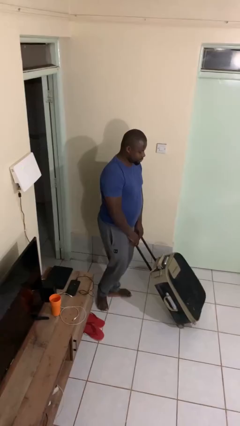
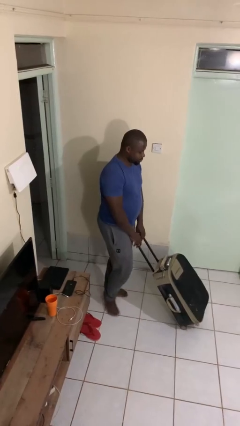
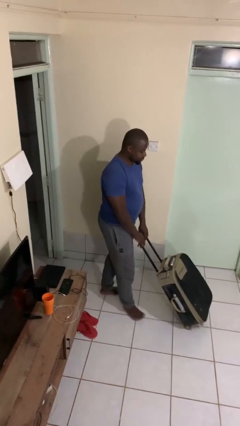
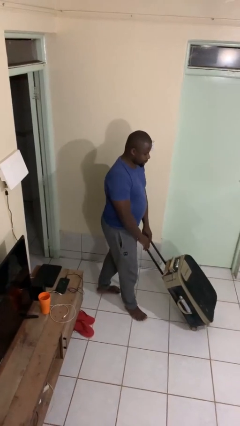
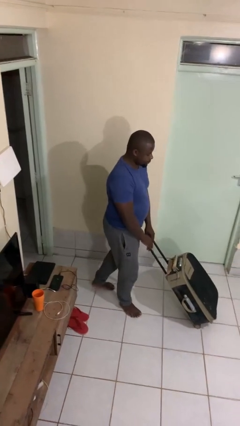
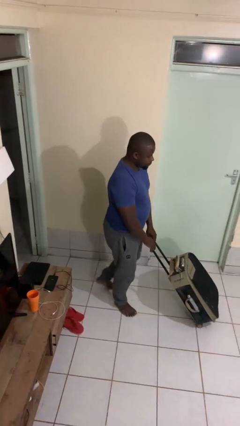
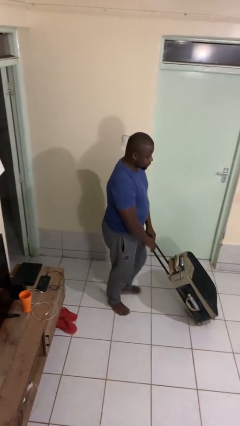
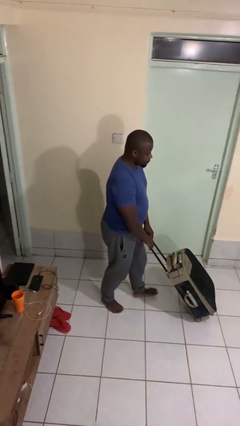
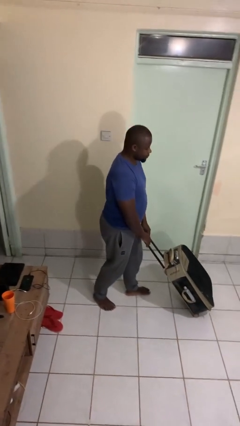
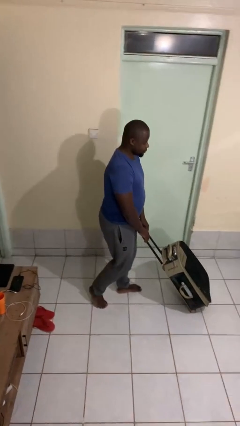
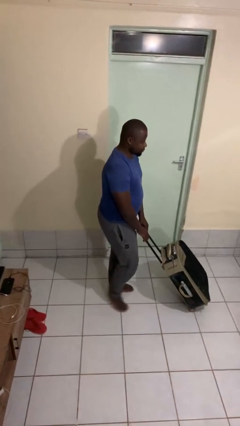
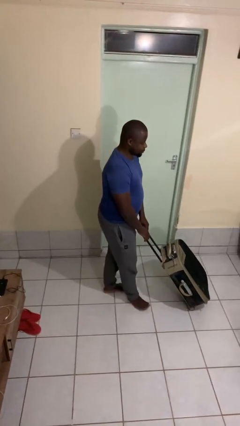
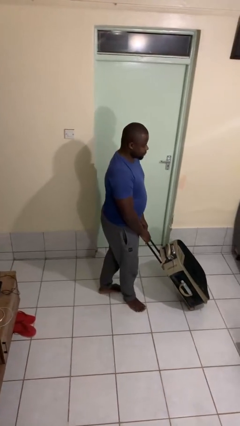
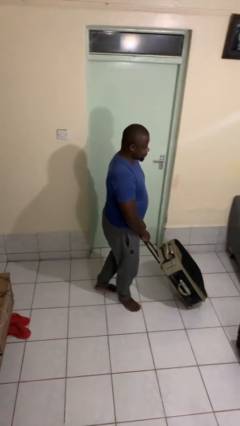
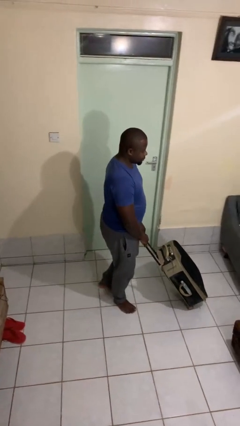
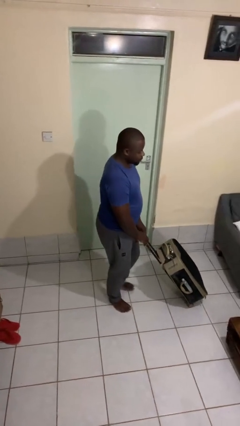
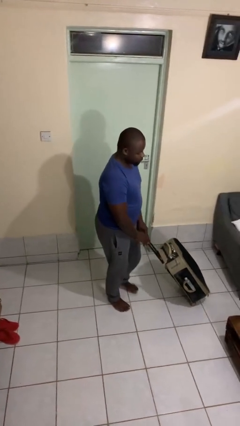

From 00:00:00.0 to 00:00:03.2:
person pushes wheeled cart

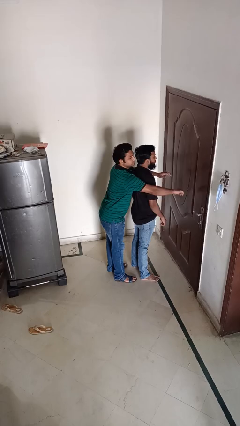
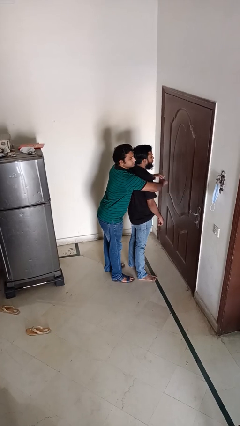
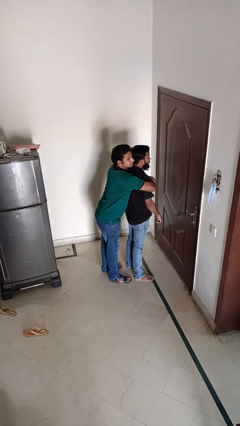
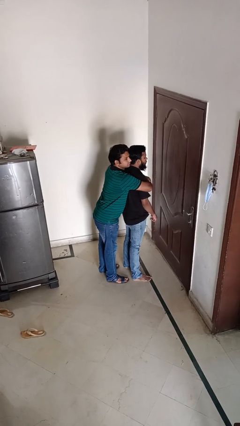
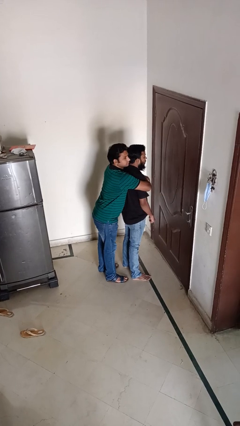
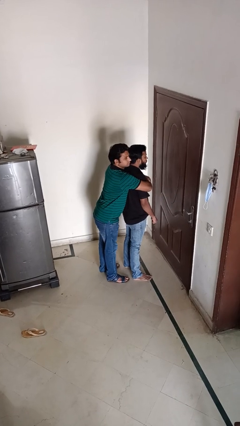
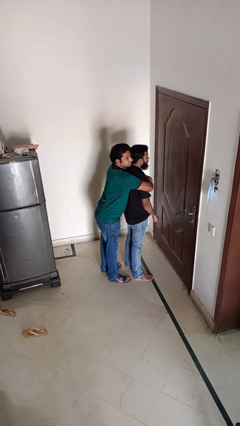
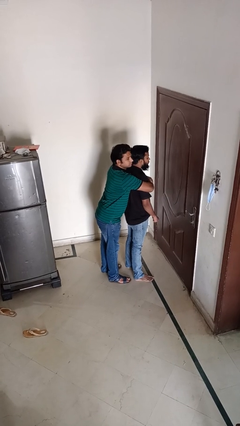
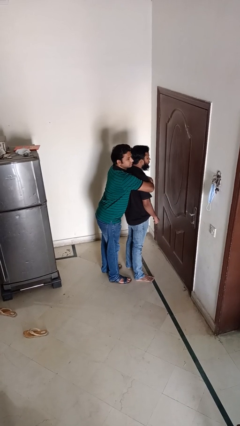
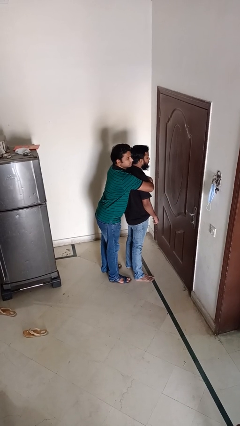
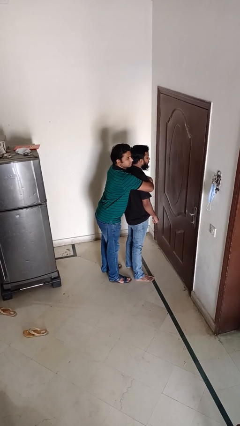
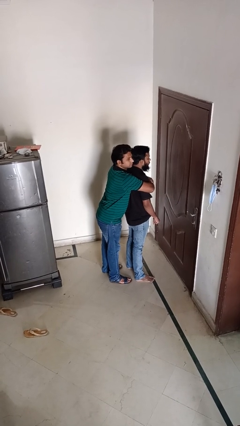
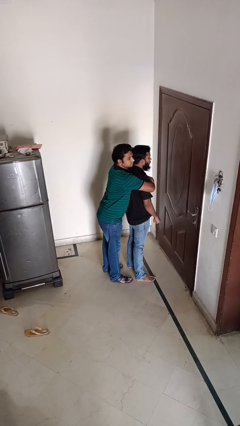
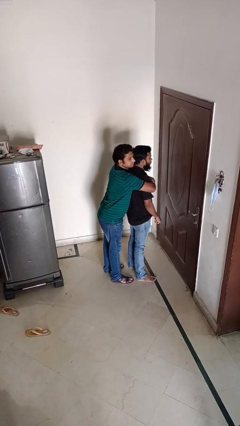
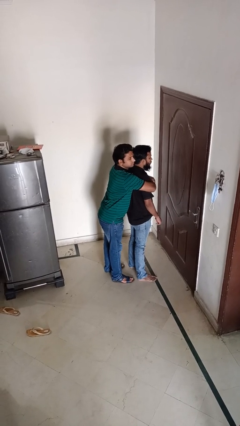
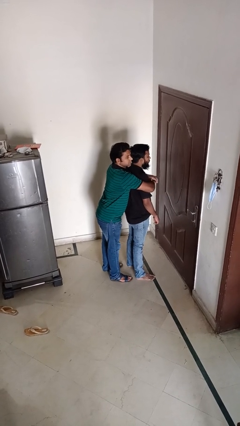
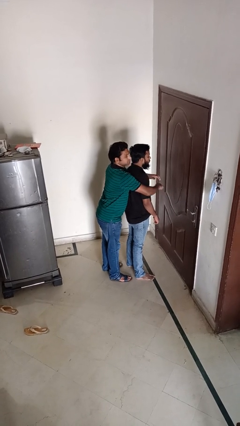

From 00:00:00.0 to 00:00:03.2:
person hugs person from behind

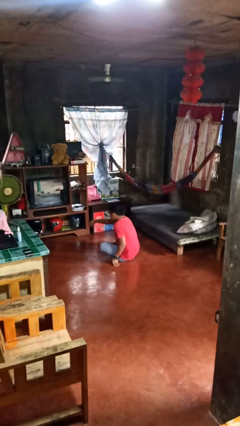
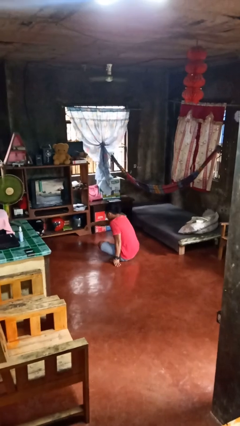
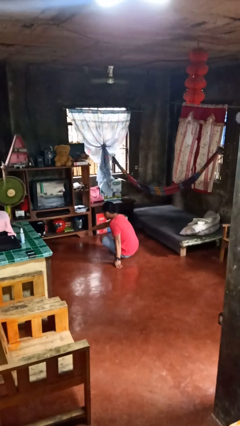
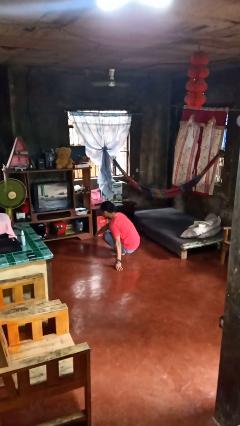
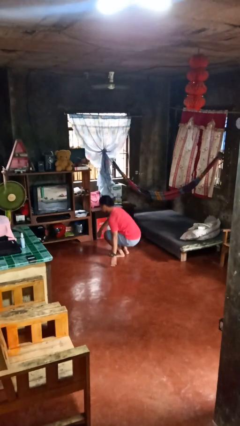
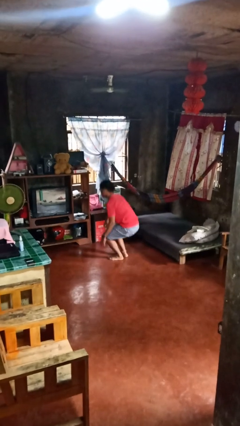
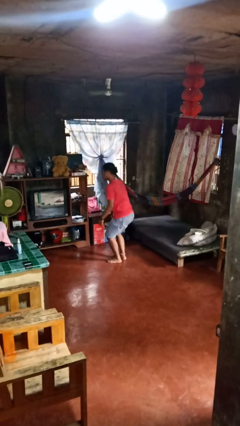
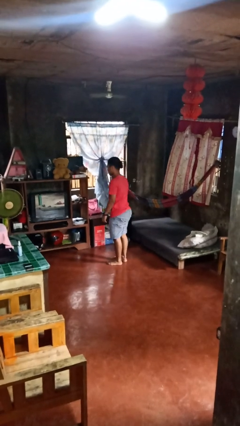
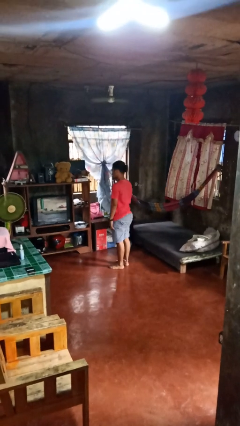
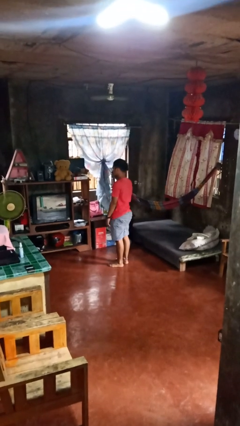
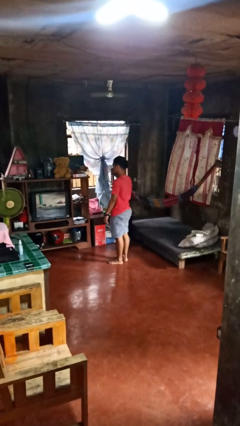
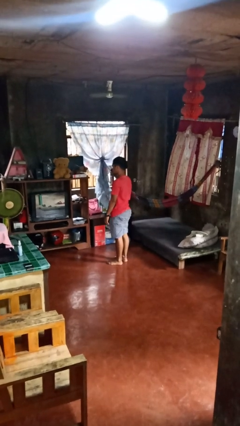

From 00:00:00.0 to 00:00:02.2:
person stands up from floor

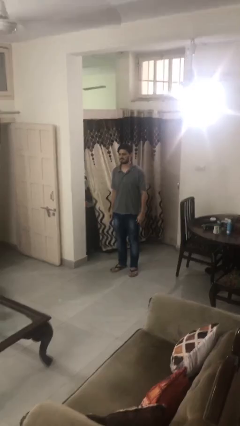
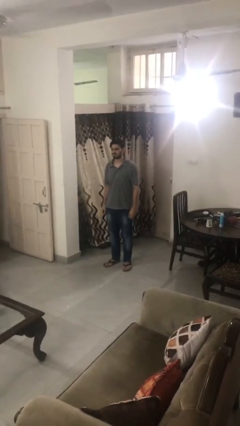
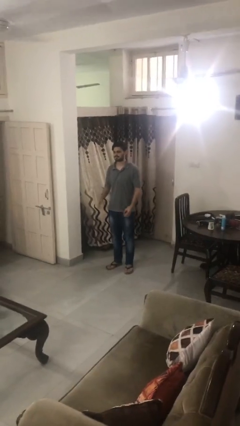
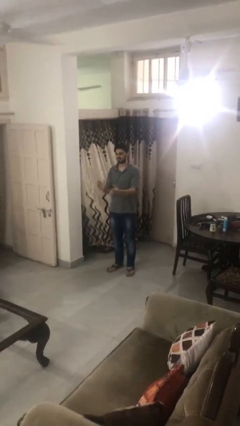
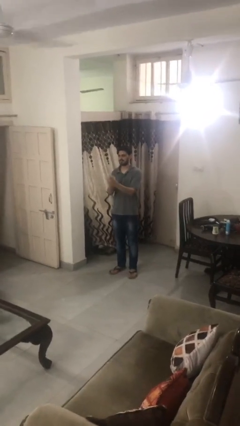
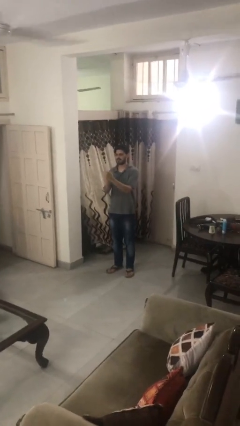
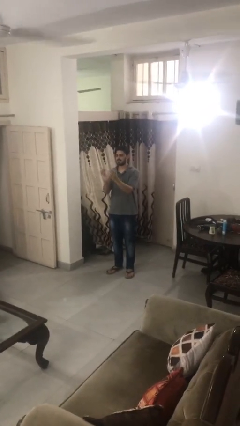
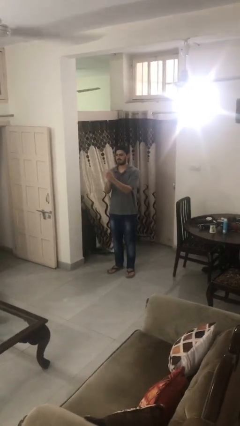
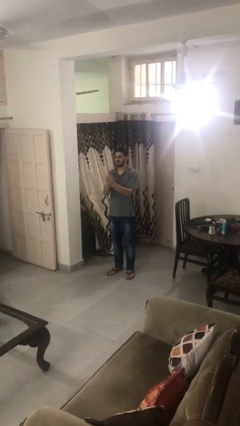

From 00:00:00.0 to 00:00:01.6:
person claps hands

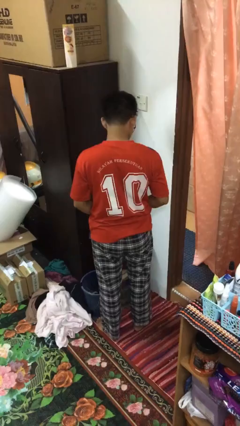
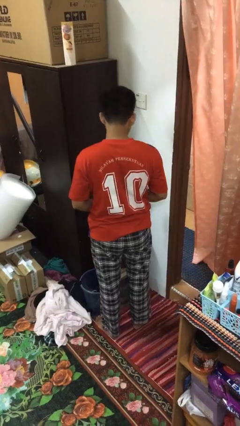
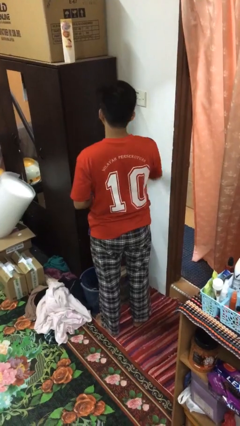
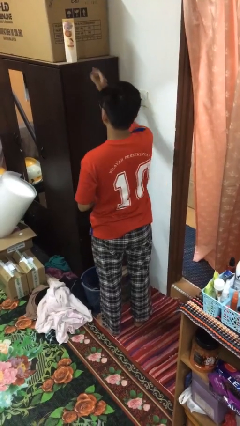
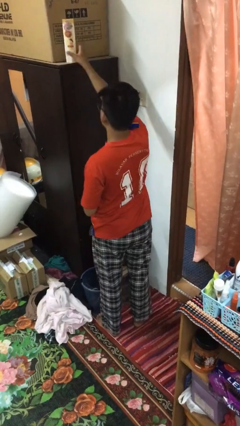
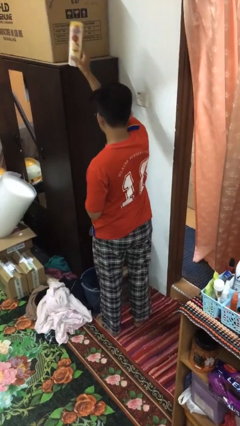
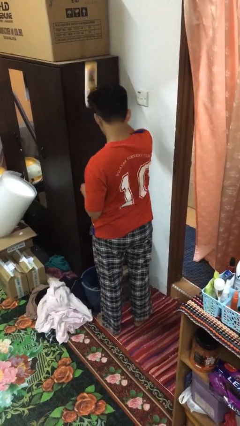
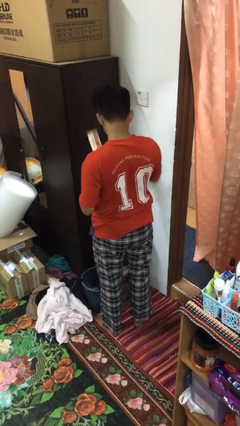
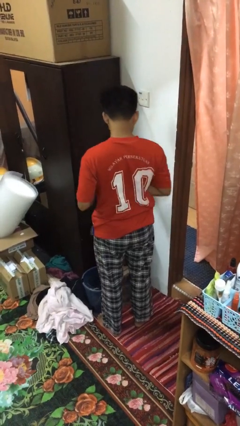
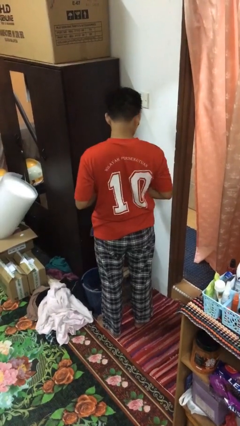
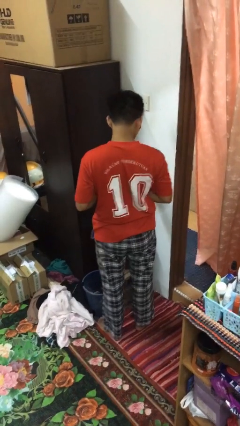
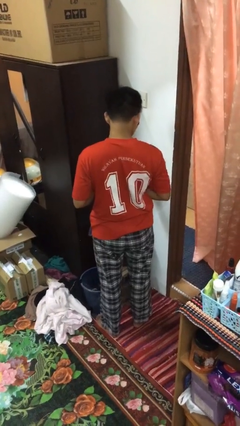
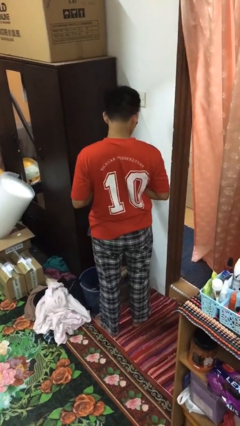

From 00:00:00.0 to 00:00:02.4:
person picks up object from shelf

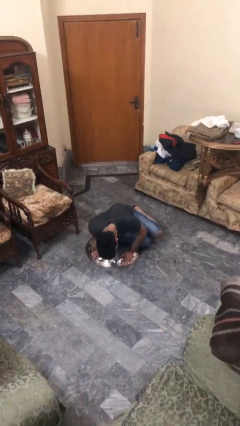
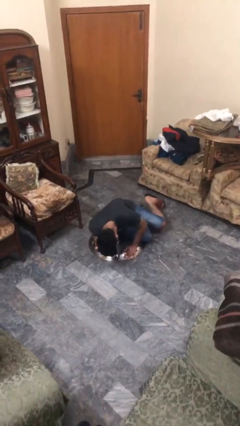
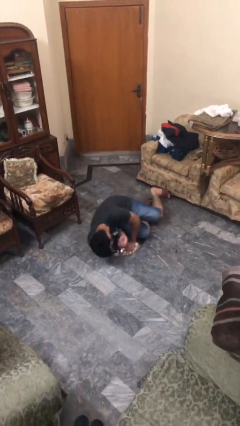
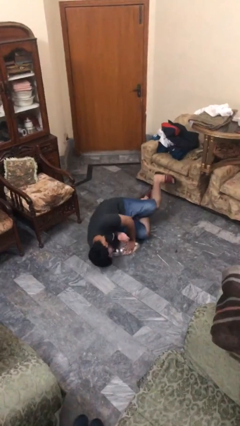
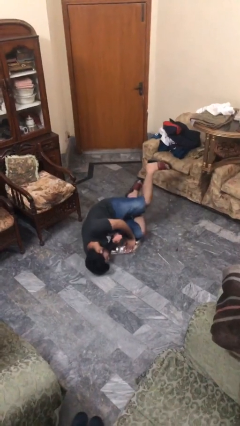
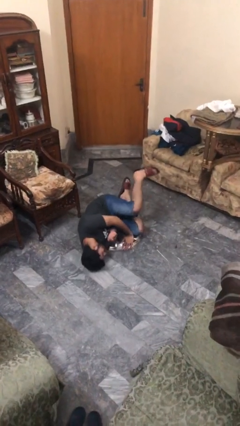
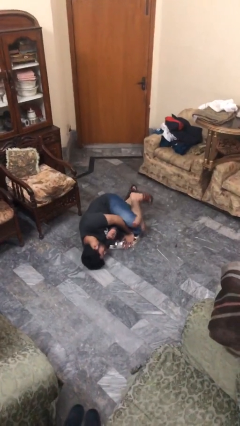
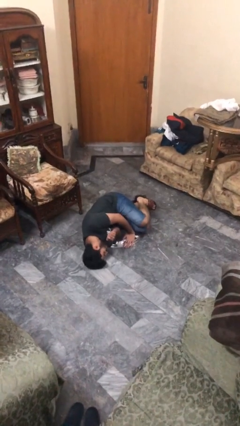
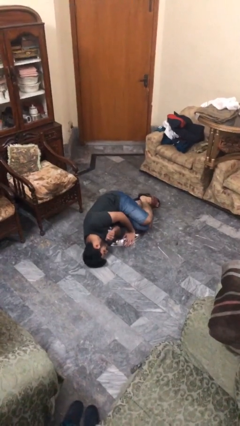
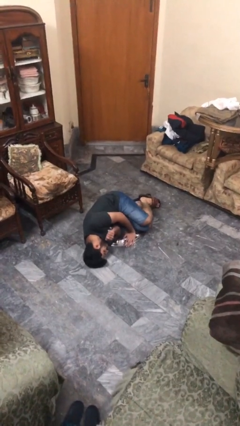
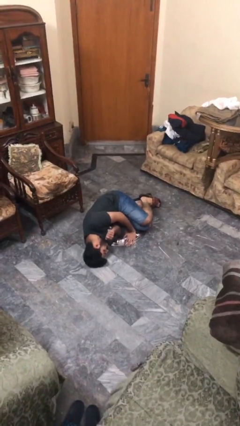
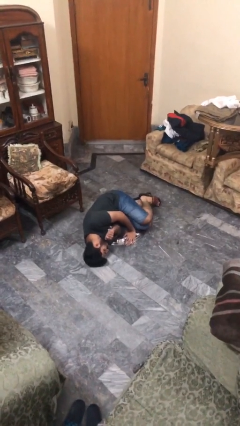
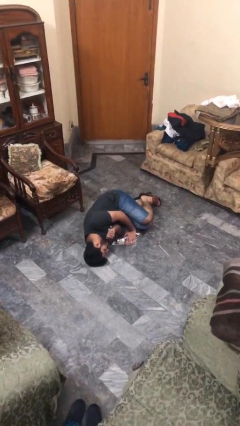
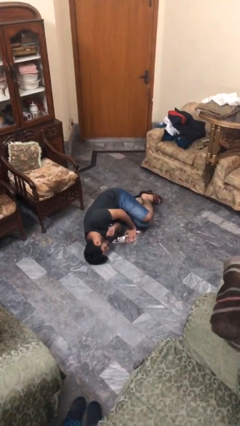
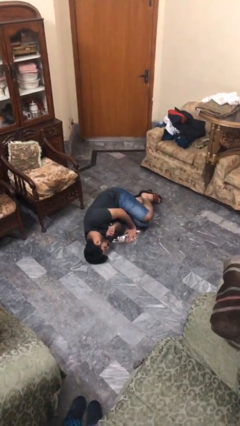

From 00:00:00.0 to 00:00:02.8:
person lies down on floor

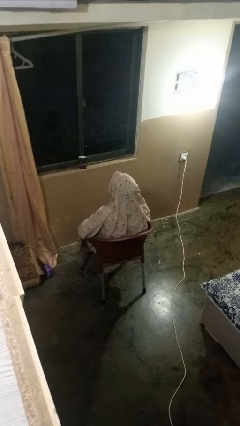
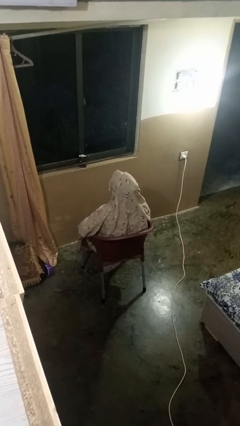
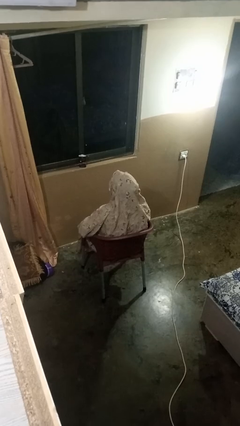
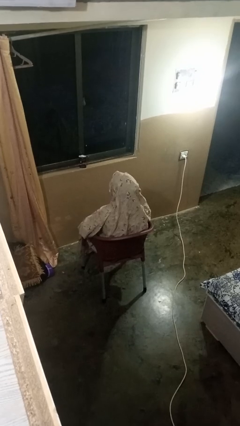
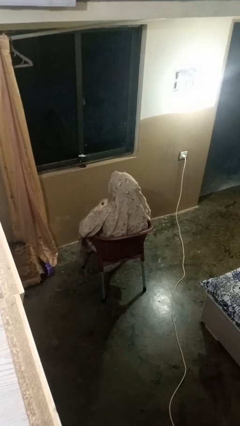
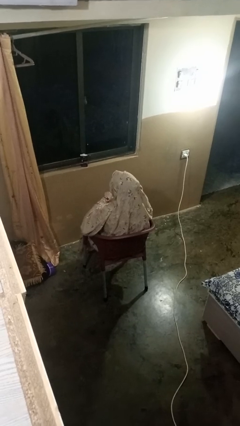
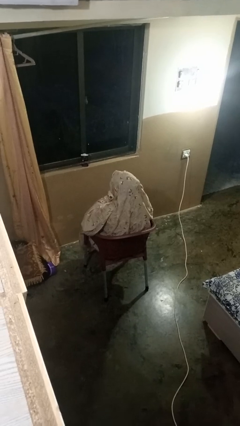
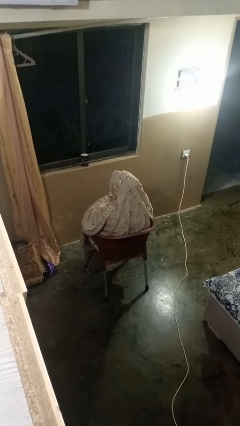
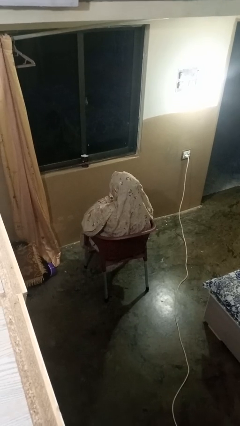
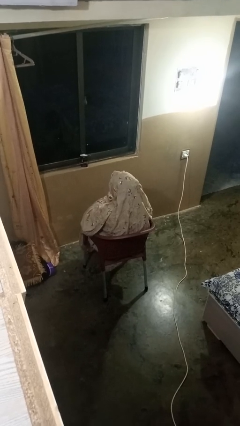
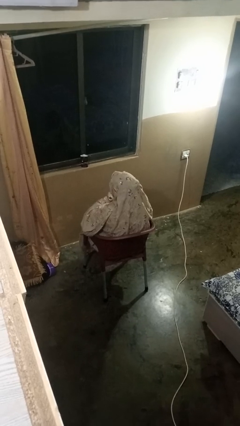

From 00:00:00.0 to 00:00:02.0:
person looks at wristwatch
